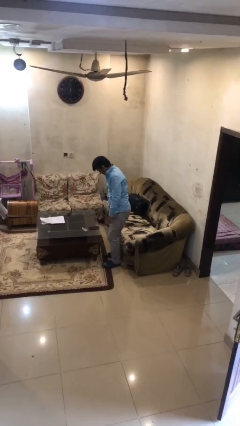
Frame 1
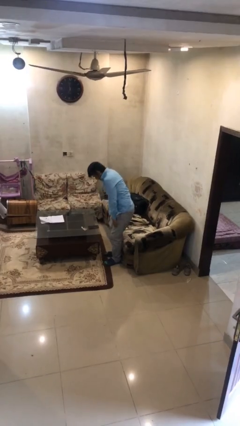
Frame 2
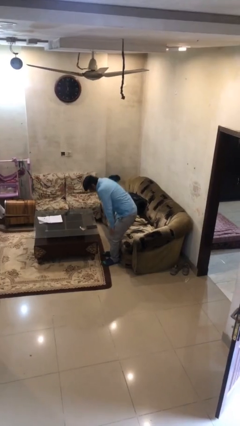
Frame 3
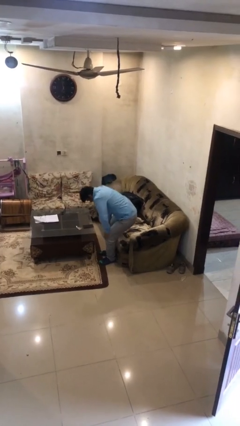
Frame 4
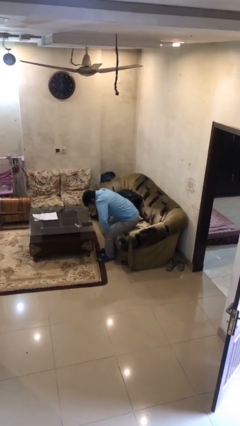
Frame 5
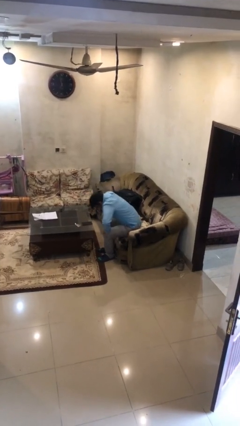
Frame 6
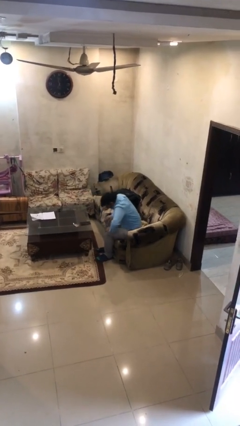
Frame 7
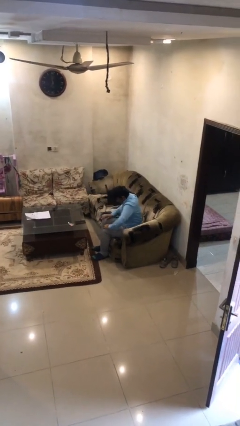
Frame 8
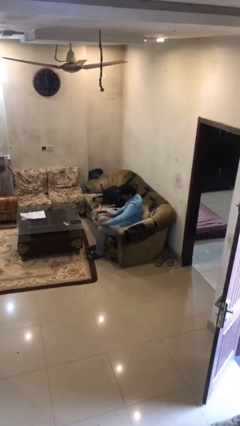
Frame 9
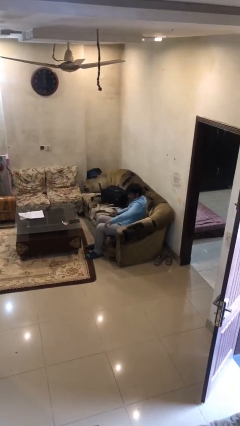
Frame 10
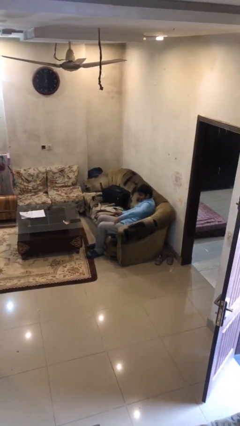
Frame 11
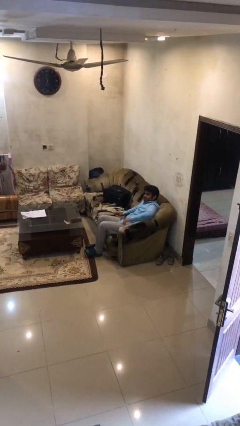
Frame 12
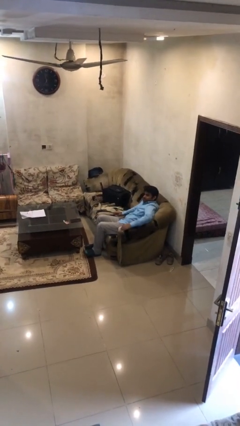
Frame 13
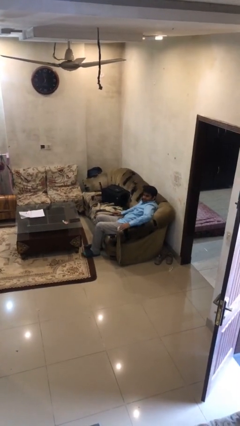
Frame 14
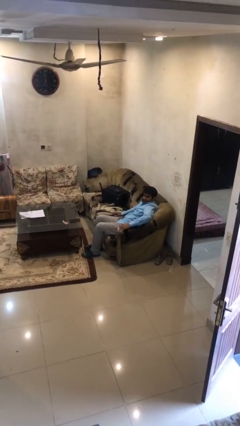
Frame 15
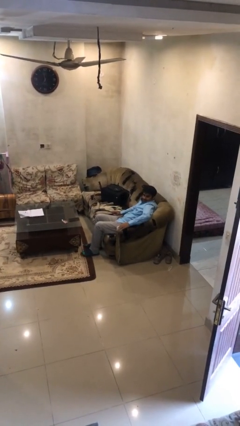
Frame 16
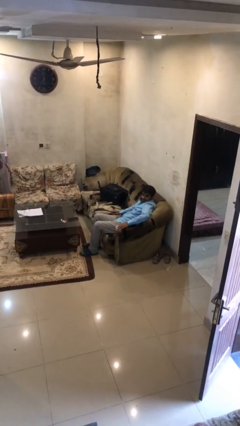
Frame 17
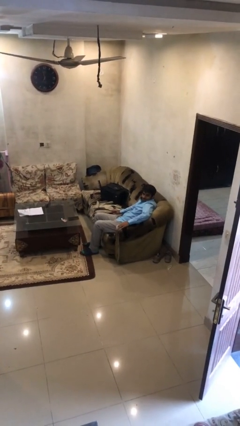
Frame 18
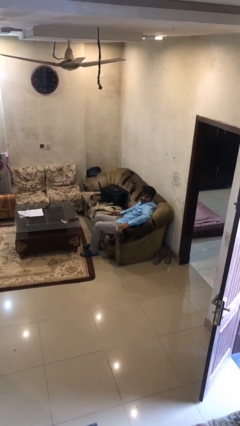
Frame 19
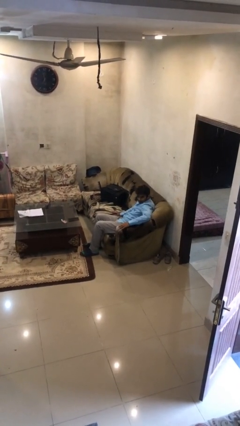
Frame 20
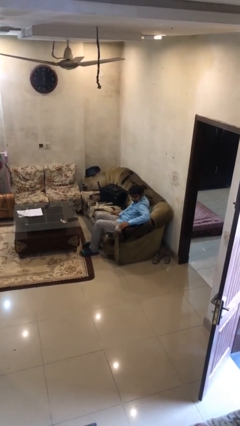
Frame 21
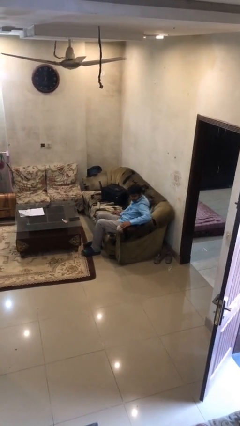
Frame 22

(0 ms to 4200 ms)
person sits down

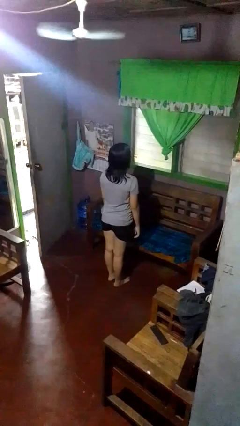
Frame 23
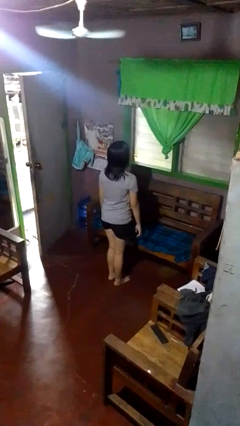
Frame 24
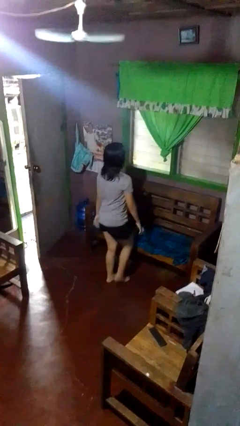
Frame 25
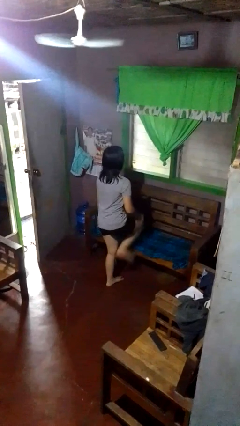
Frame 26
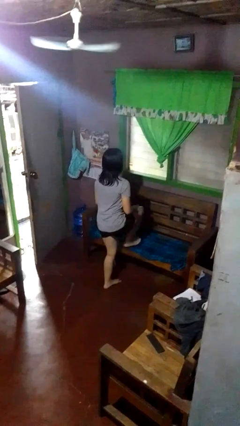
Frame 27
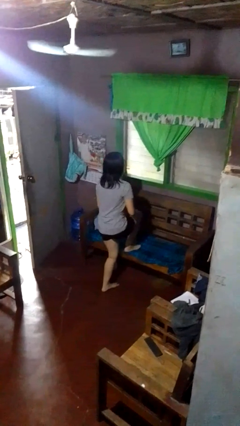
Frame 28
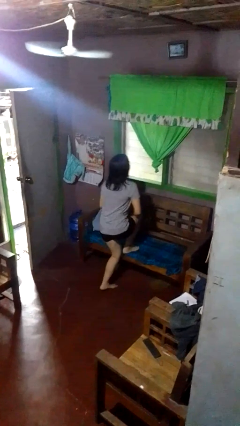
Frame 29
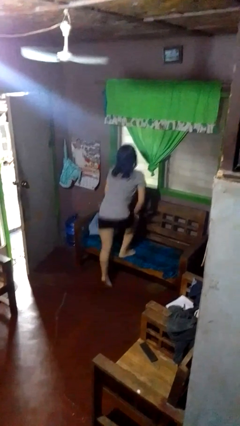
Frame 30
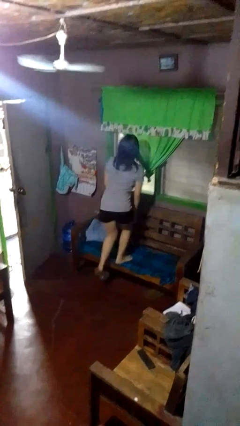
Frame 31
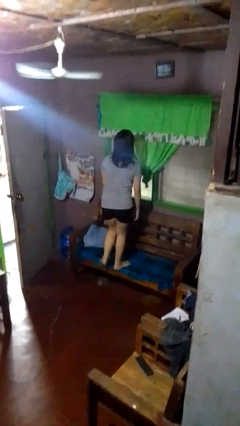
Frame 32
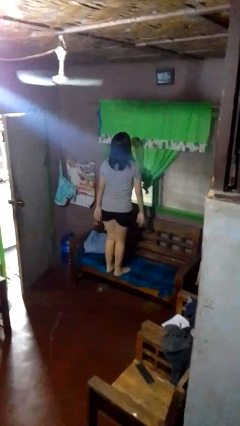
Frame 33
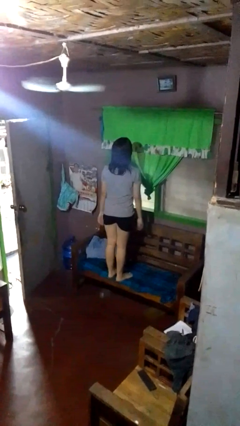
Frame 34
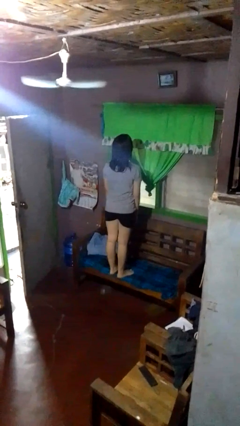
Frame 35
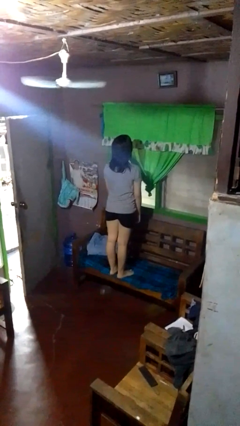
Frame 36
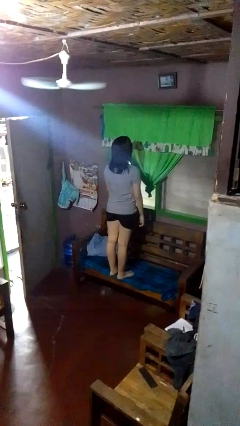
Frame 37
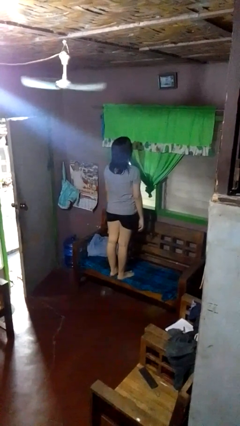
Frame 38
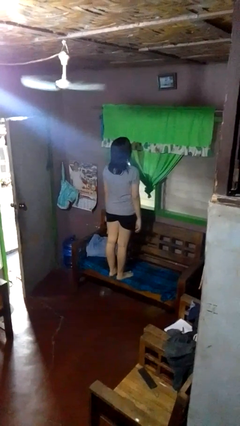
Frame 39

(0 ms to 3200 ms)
person climbs on couch

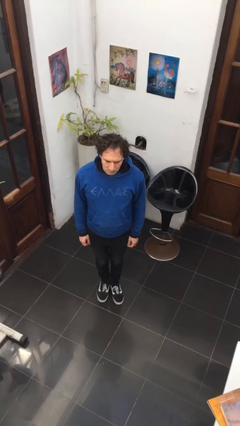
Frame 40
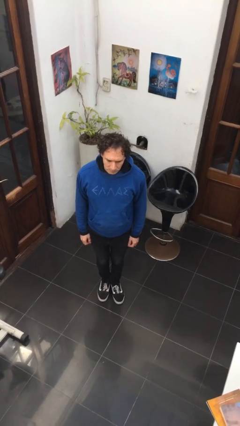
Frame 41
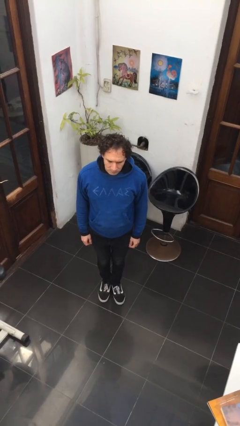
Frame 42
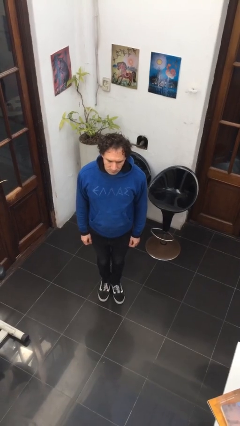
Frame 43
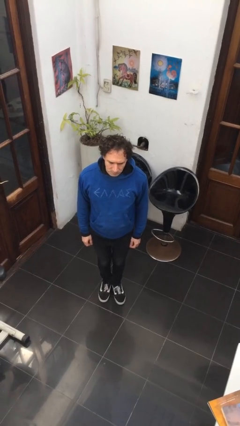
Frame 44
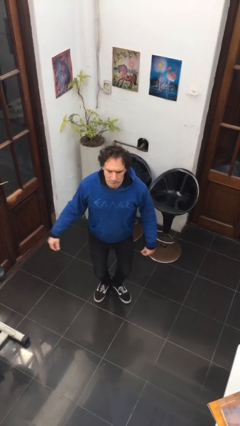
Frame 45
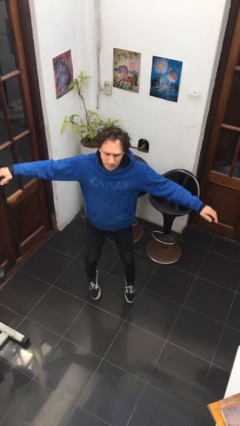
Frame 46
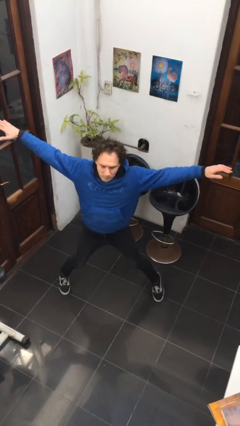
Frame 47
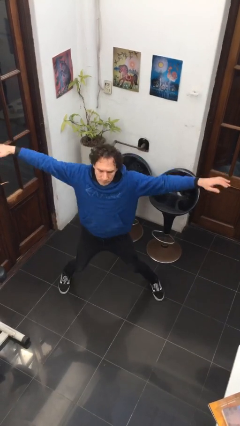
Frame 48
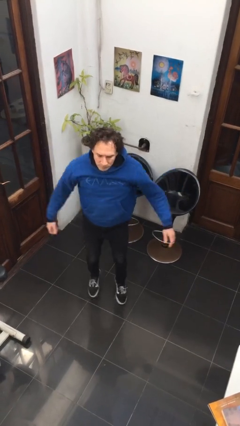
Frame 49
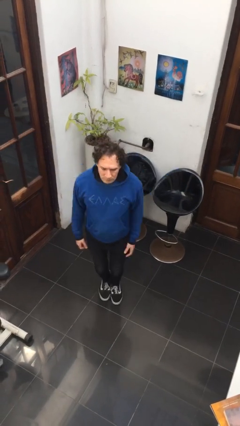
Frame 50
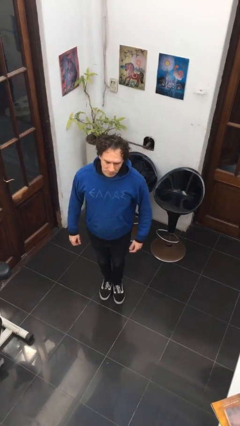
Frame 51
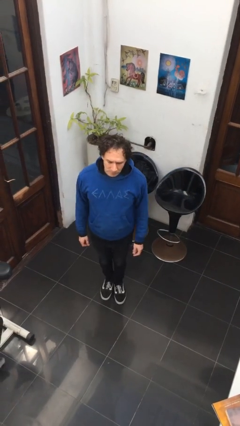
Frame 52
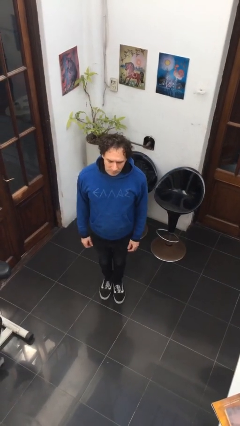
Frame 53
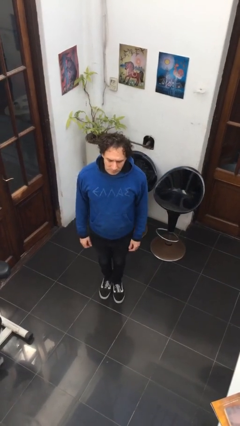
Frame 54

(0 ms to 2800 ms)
person exercises with jumping jacks

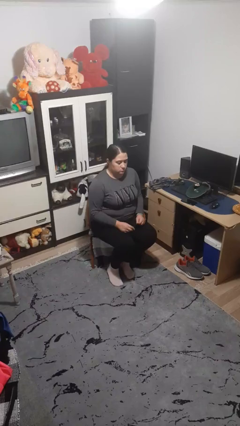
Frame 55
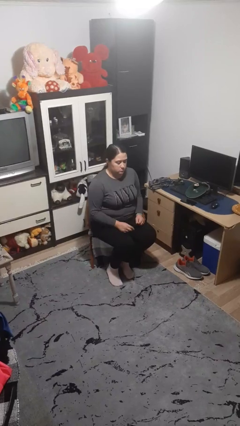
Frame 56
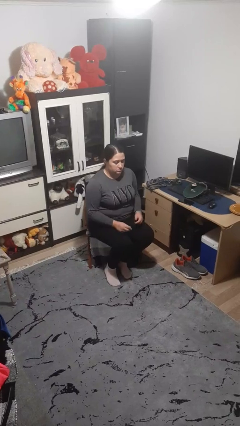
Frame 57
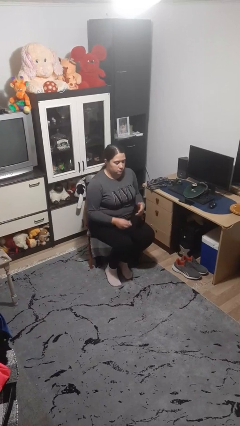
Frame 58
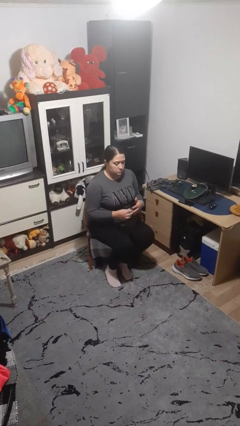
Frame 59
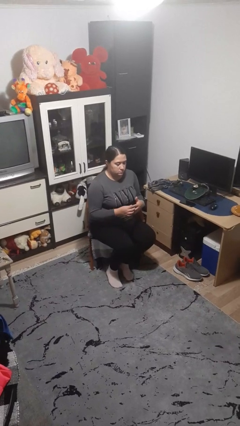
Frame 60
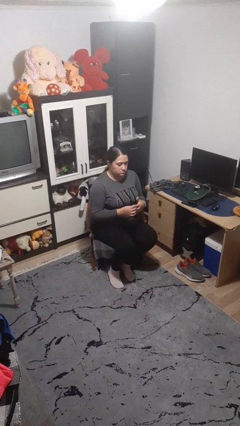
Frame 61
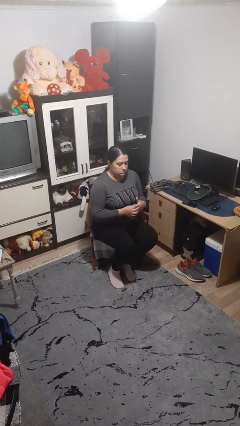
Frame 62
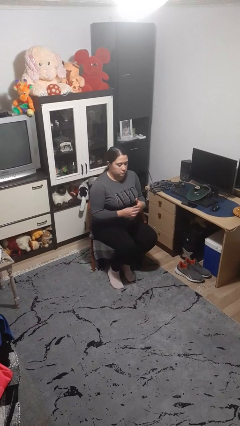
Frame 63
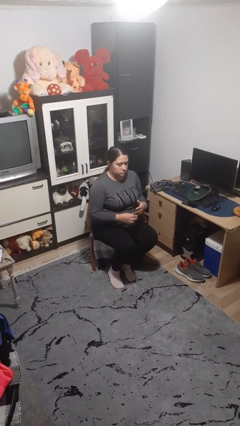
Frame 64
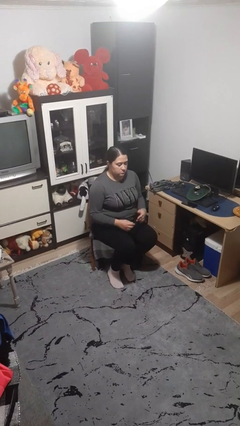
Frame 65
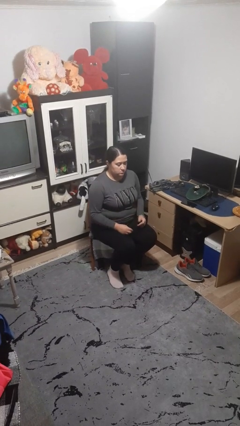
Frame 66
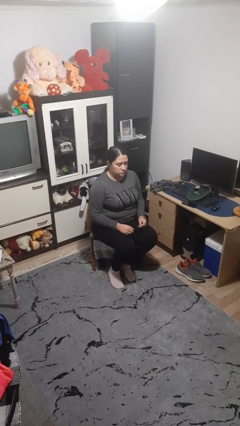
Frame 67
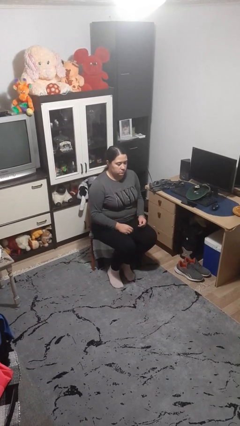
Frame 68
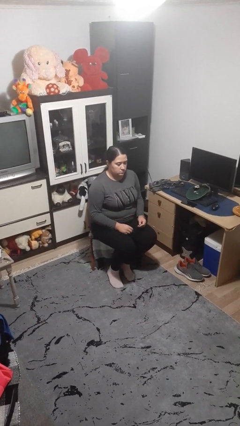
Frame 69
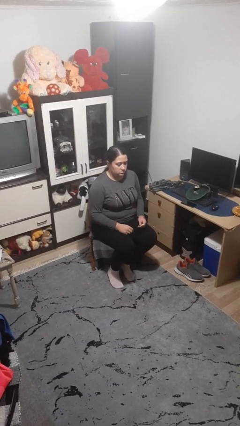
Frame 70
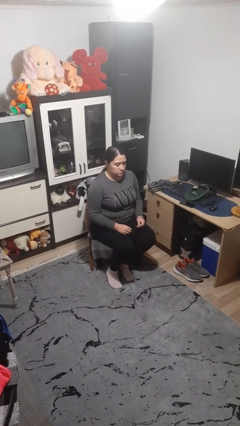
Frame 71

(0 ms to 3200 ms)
person puts on ring

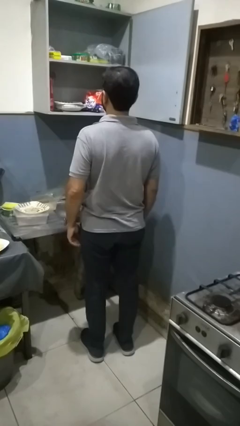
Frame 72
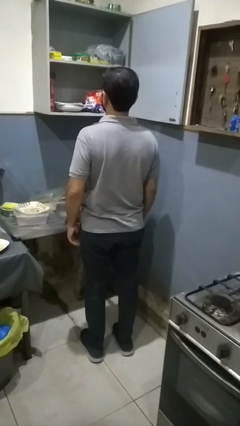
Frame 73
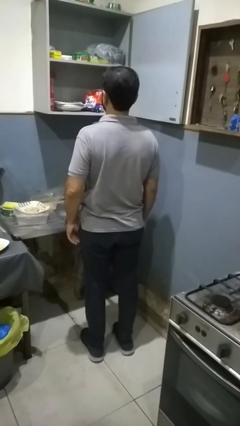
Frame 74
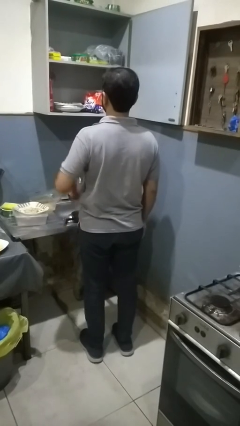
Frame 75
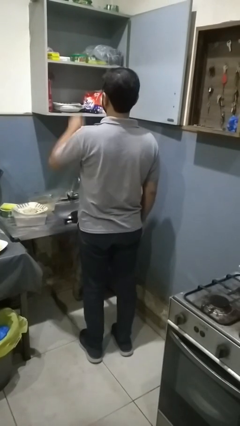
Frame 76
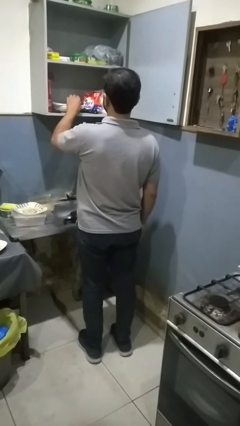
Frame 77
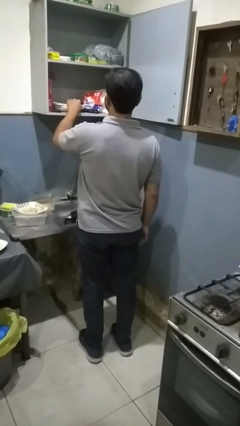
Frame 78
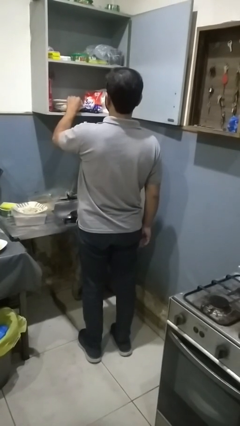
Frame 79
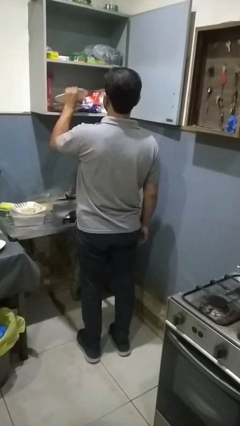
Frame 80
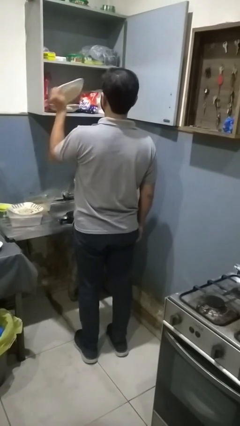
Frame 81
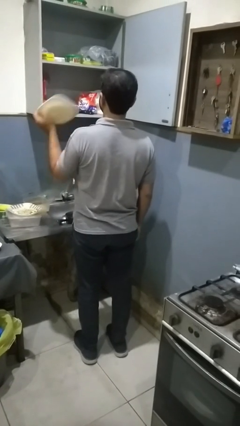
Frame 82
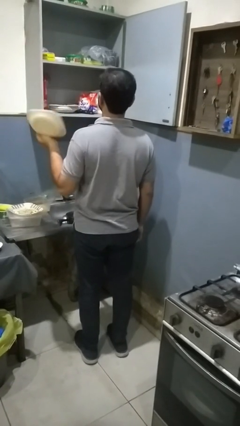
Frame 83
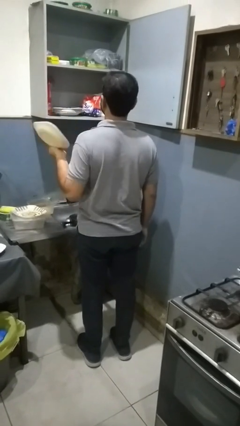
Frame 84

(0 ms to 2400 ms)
person takes object from cabinet

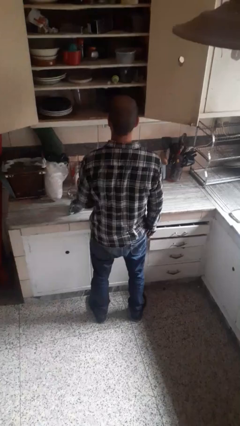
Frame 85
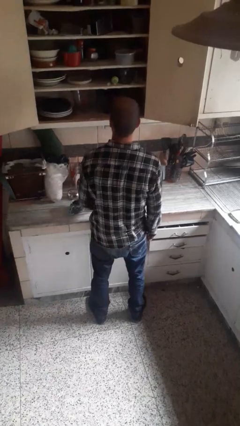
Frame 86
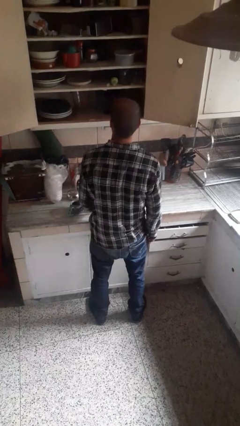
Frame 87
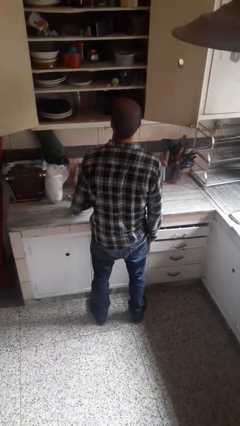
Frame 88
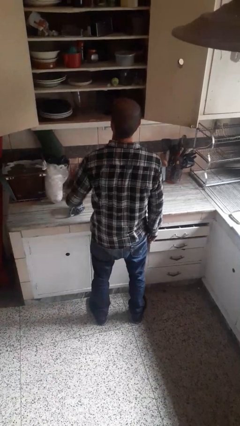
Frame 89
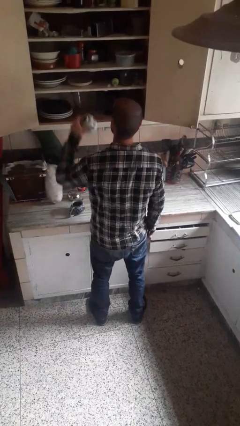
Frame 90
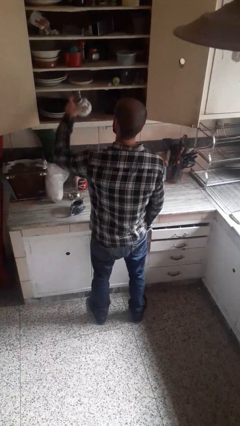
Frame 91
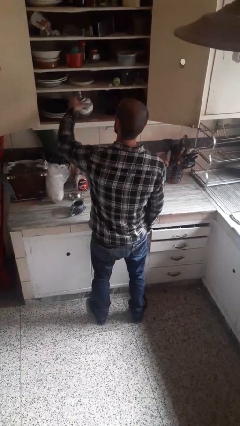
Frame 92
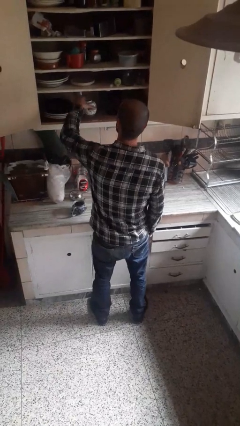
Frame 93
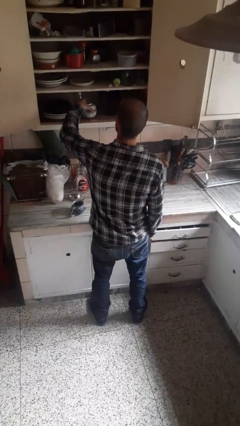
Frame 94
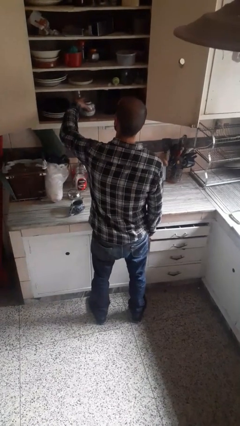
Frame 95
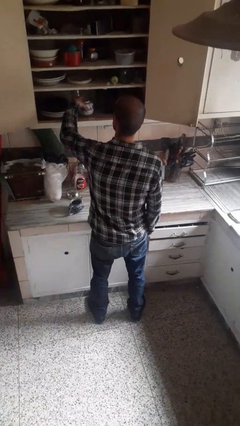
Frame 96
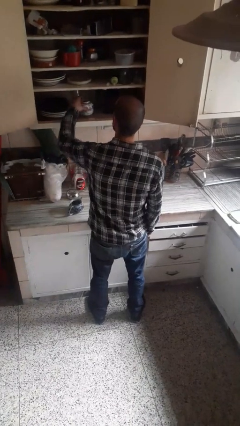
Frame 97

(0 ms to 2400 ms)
person puts object in cabinet
